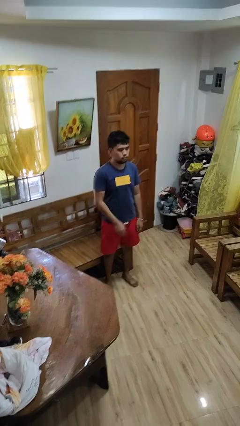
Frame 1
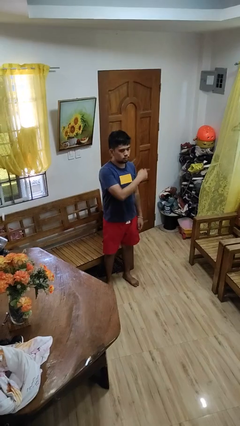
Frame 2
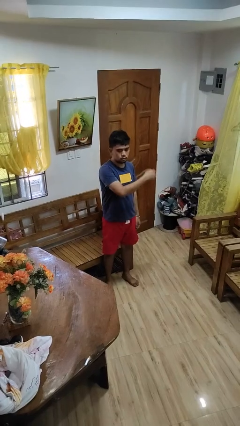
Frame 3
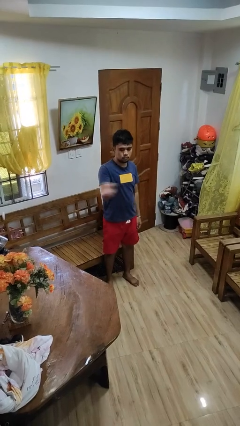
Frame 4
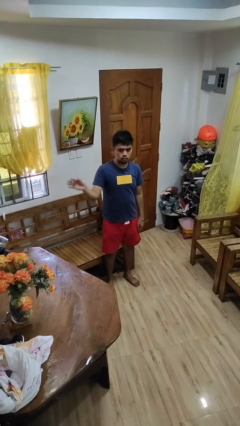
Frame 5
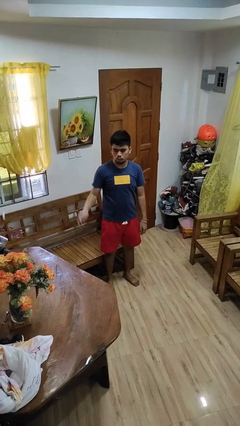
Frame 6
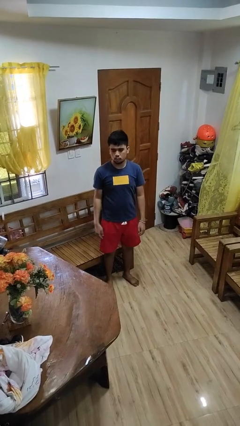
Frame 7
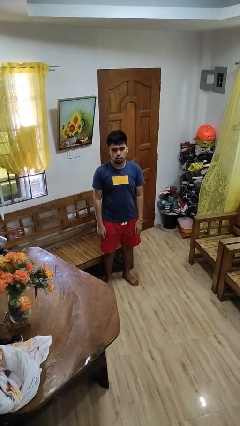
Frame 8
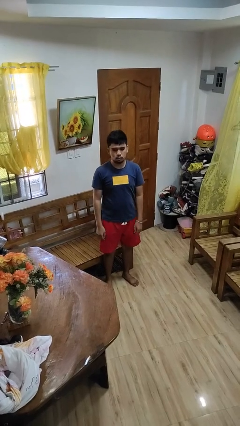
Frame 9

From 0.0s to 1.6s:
person gestures swipe right

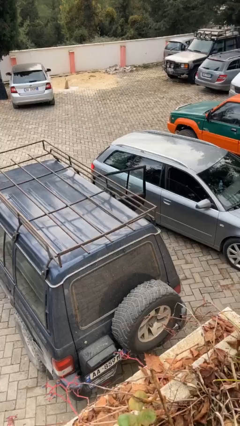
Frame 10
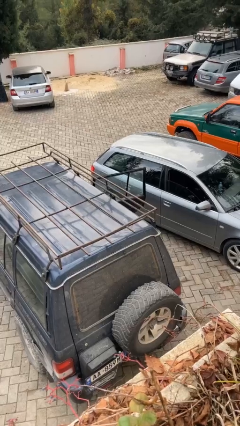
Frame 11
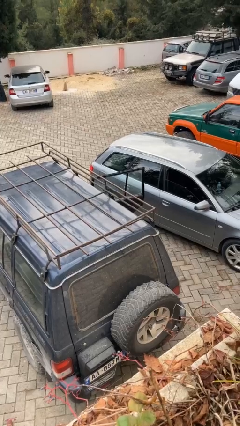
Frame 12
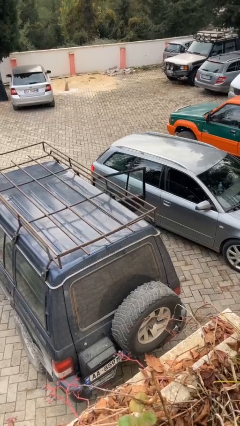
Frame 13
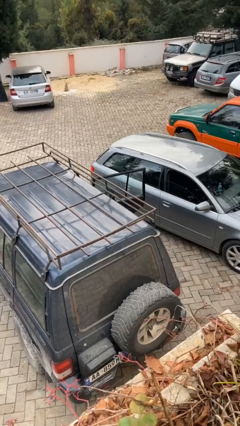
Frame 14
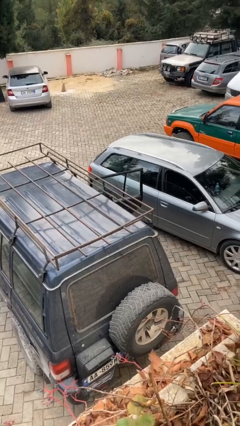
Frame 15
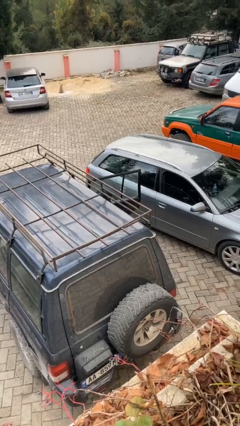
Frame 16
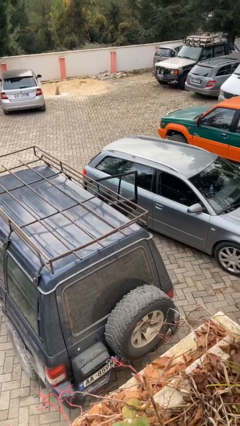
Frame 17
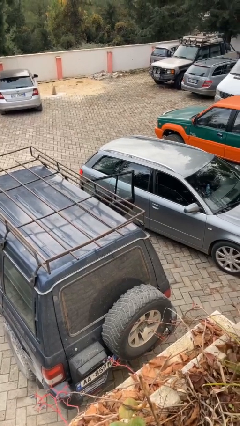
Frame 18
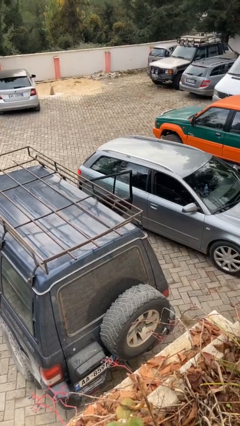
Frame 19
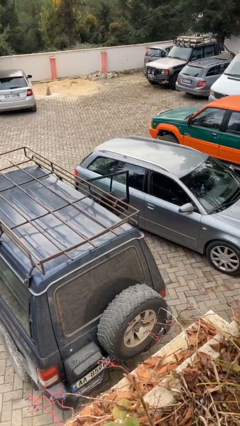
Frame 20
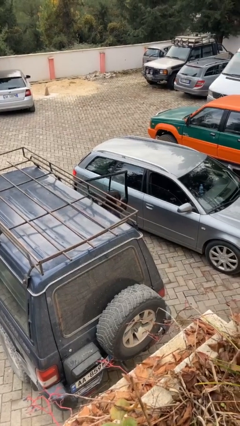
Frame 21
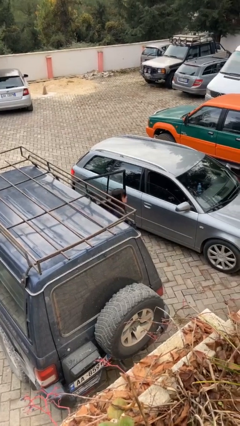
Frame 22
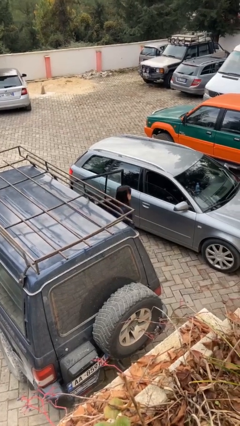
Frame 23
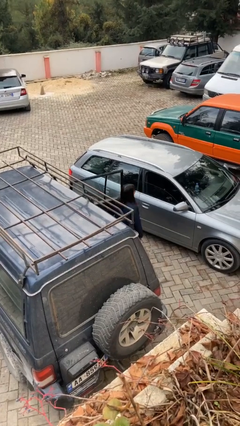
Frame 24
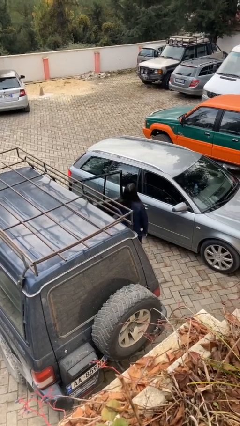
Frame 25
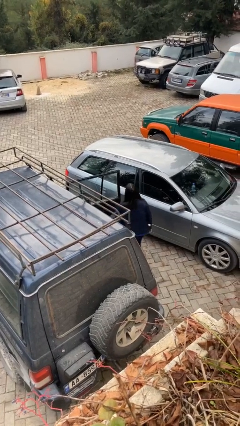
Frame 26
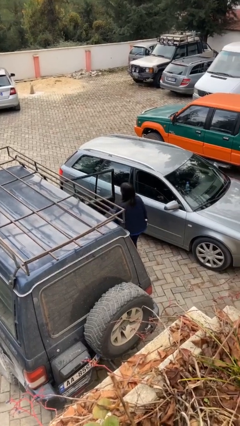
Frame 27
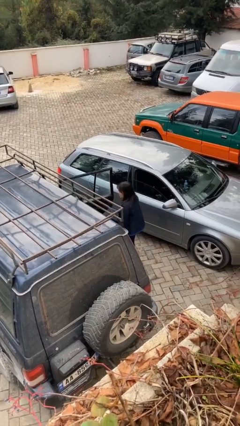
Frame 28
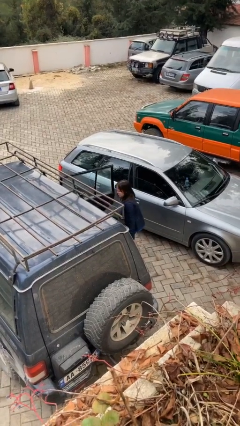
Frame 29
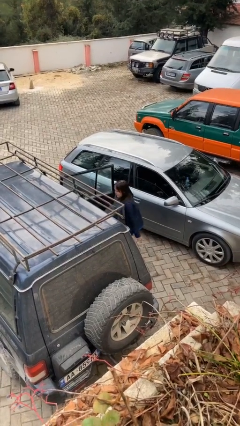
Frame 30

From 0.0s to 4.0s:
person exits car

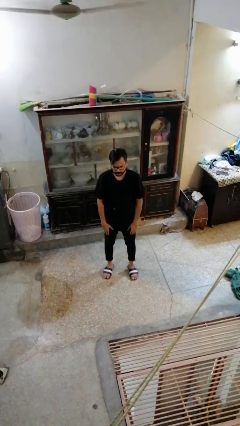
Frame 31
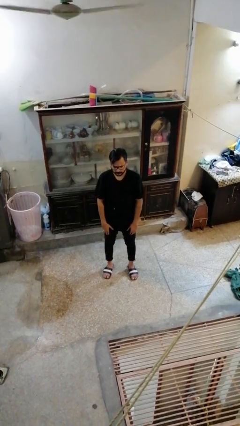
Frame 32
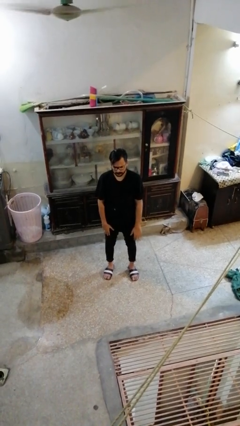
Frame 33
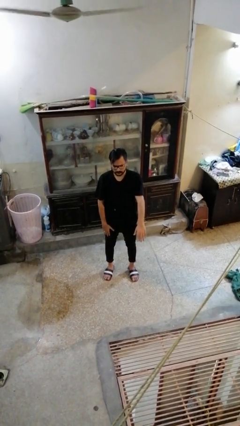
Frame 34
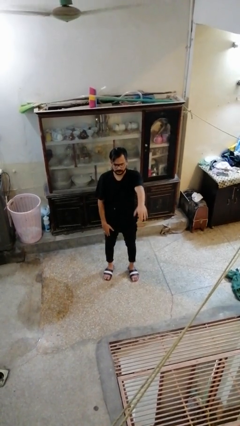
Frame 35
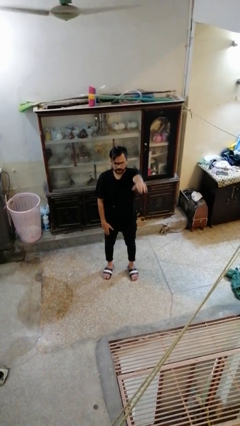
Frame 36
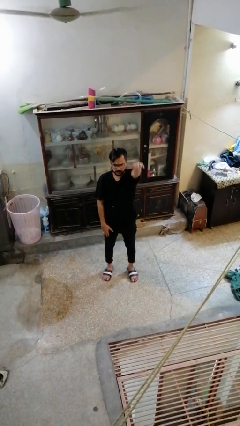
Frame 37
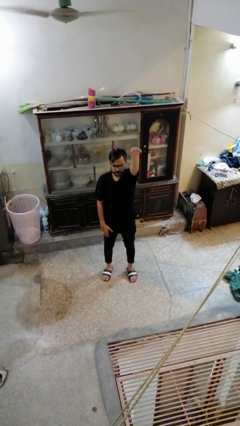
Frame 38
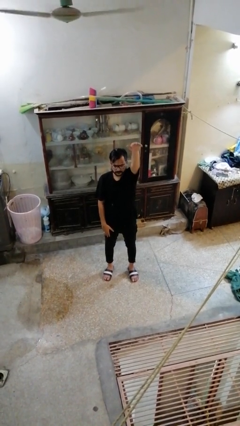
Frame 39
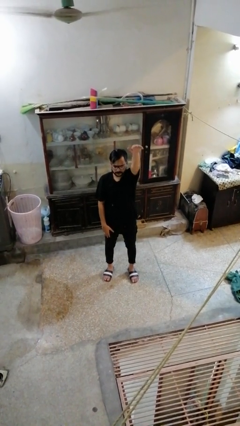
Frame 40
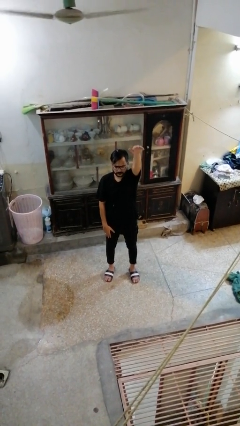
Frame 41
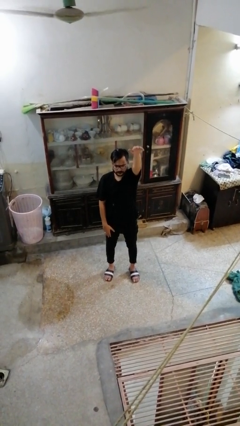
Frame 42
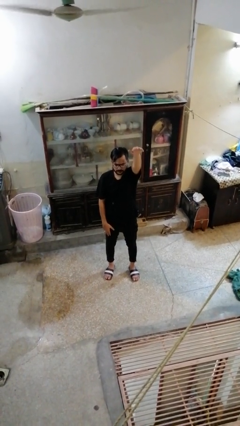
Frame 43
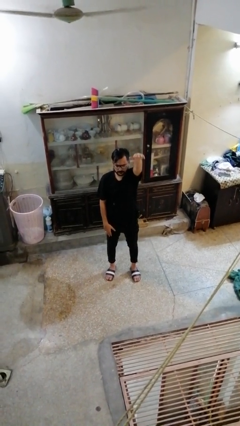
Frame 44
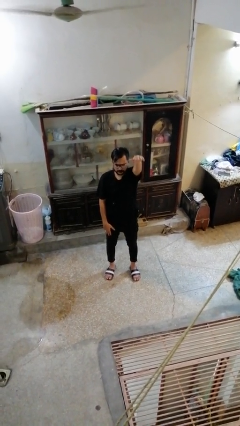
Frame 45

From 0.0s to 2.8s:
person gestures swipe up

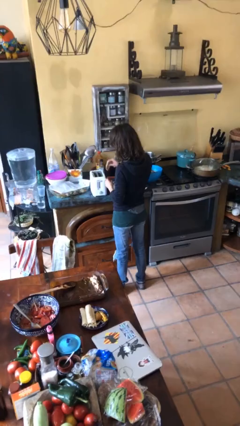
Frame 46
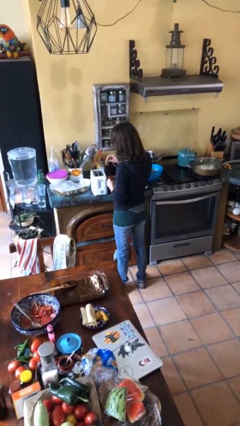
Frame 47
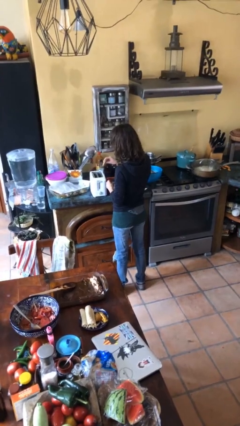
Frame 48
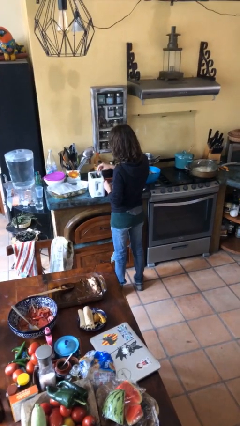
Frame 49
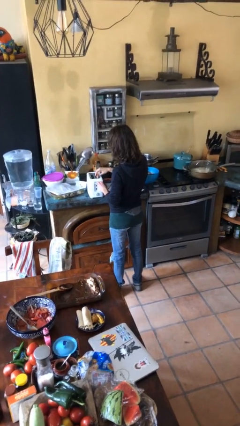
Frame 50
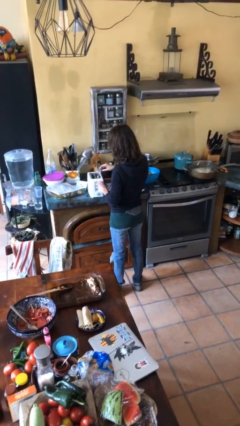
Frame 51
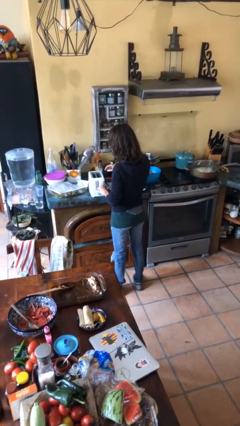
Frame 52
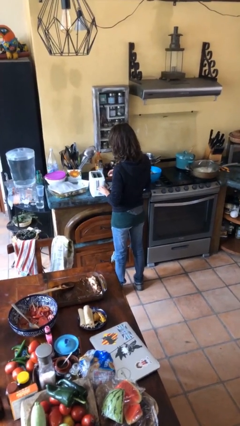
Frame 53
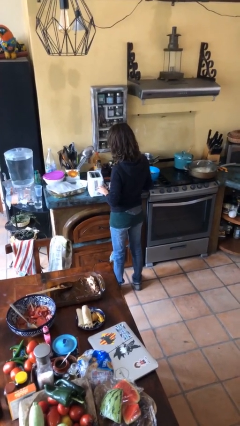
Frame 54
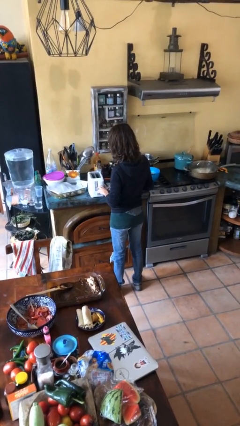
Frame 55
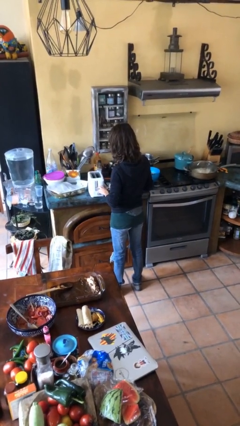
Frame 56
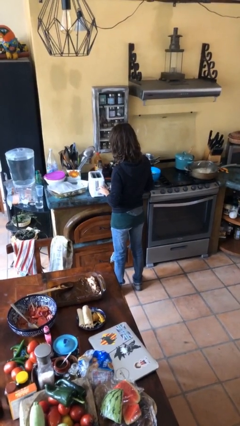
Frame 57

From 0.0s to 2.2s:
person puts object into toaster

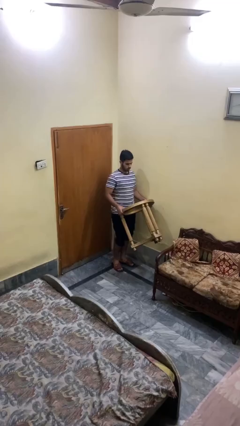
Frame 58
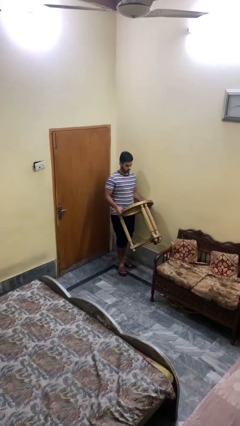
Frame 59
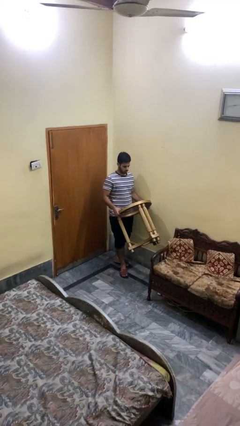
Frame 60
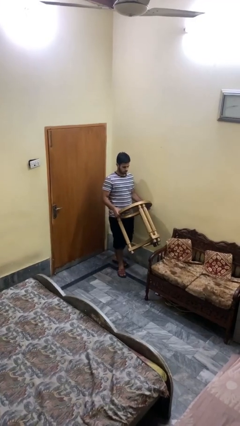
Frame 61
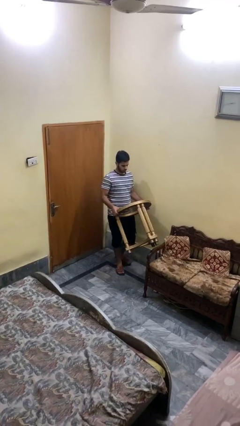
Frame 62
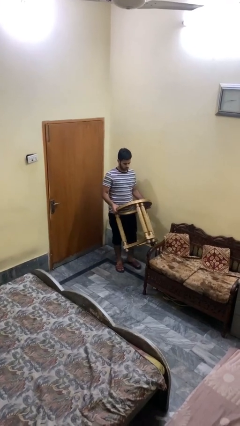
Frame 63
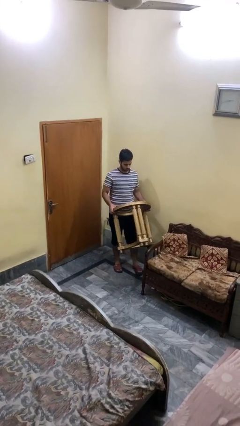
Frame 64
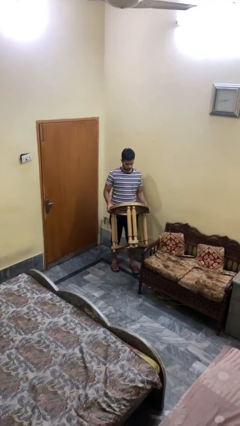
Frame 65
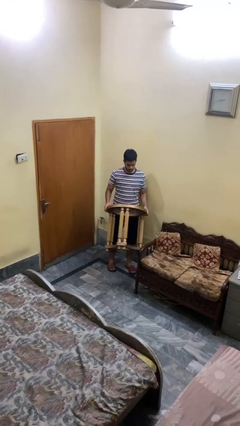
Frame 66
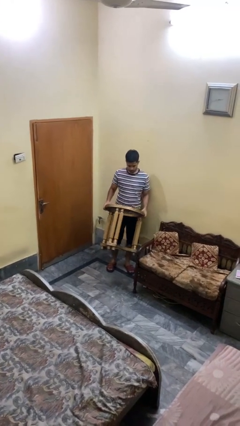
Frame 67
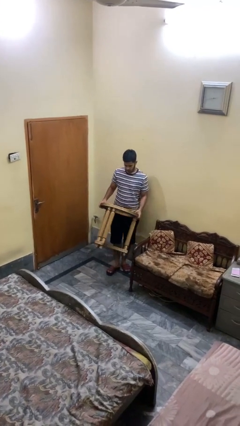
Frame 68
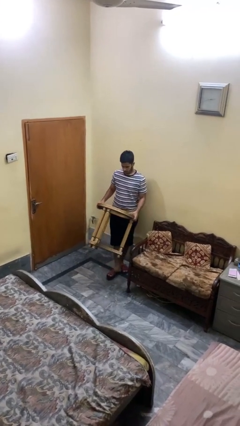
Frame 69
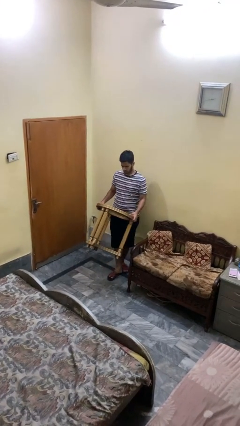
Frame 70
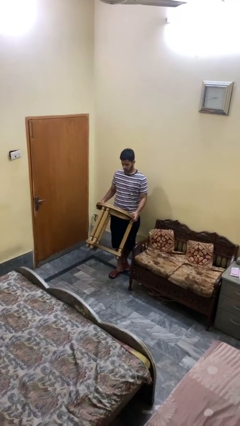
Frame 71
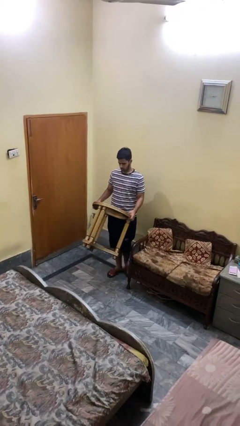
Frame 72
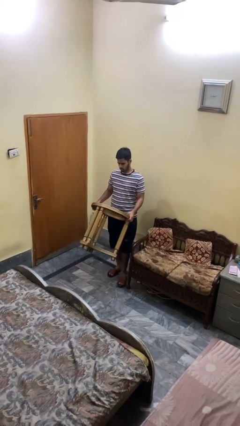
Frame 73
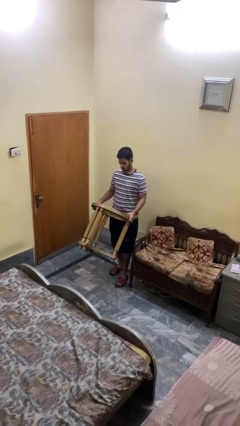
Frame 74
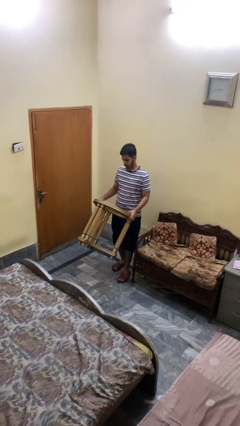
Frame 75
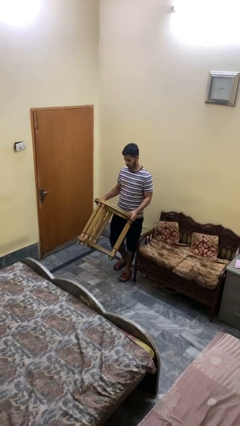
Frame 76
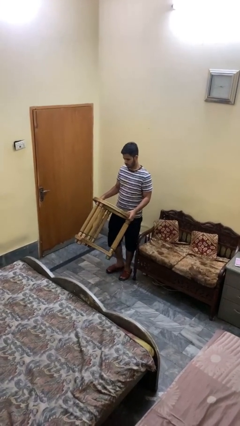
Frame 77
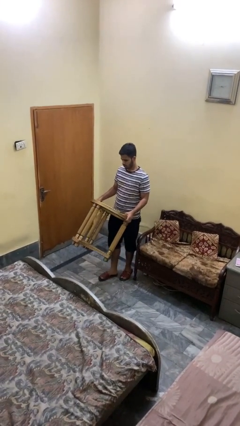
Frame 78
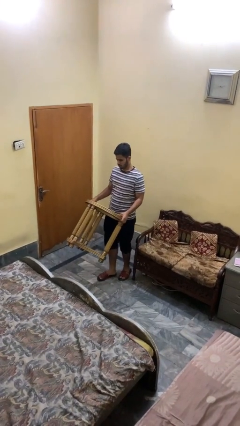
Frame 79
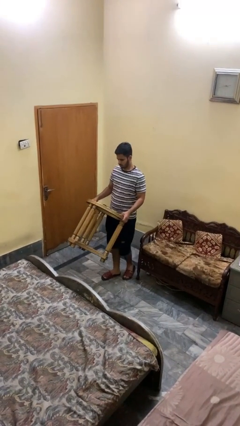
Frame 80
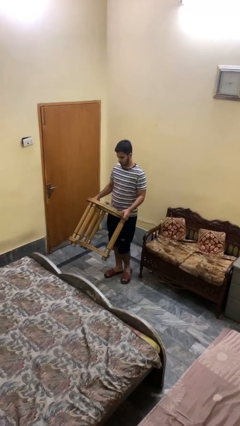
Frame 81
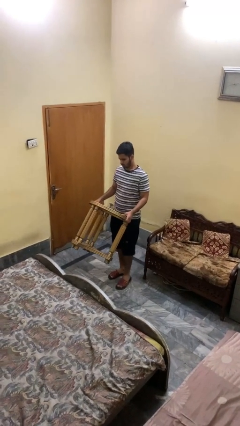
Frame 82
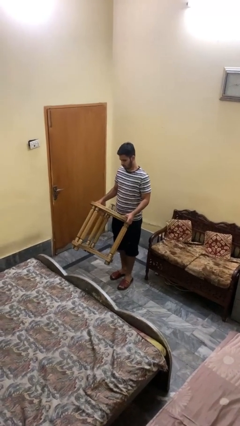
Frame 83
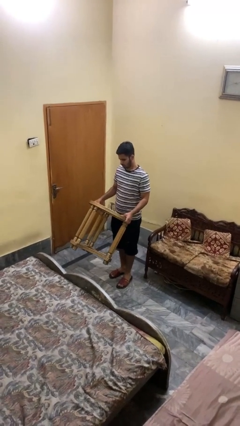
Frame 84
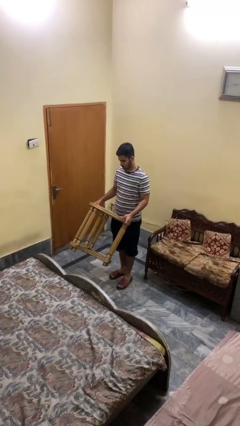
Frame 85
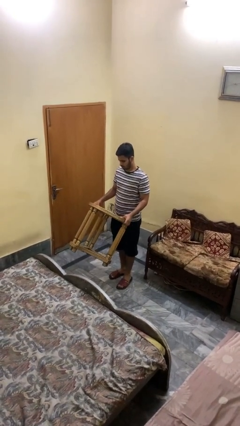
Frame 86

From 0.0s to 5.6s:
person carries furniture

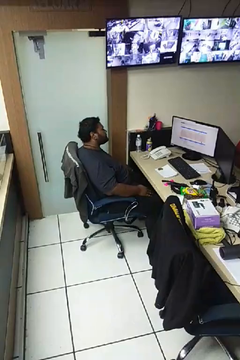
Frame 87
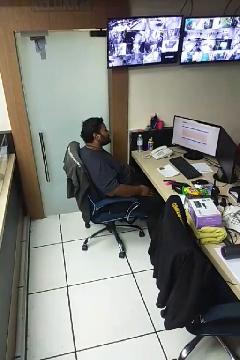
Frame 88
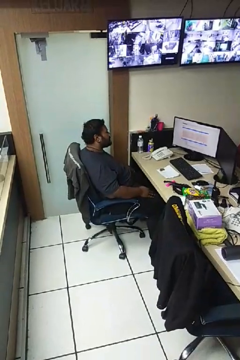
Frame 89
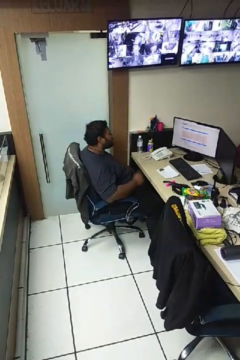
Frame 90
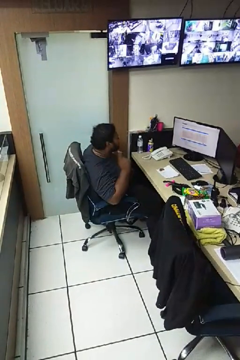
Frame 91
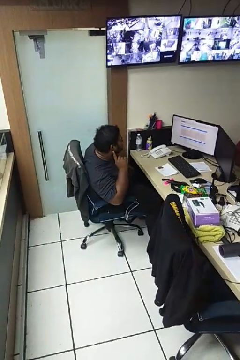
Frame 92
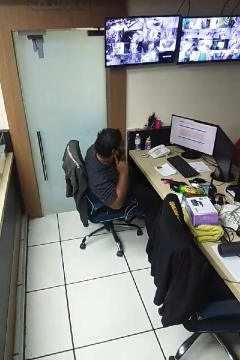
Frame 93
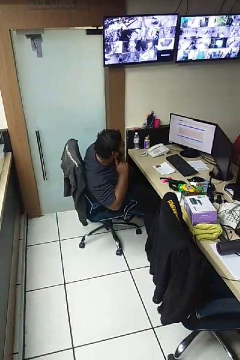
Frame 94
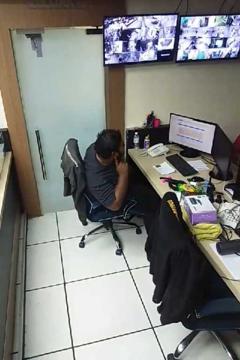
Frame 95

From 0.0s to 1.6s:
person gestures listen closely
